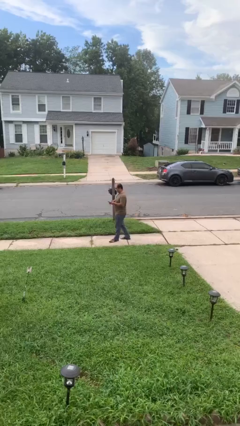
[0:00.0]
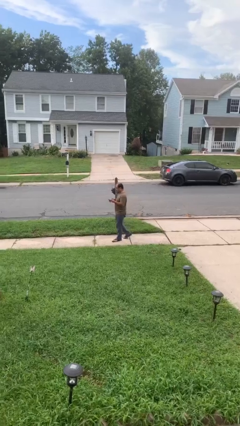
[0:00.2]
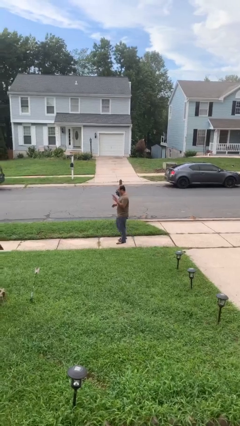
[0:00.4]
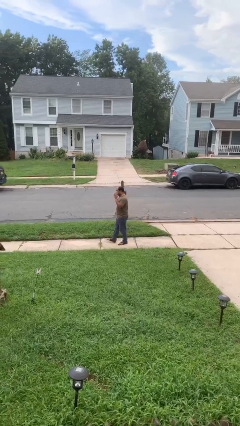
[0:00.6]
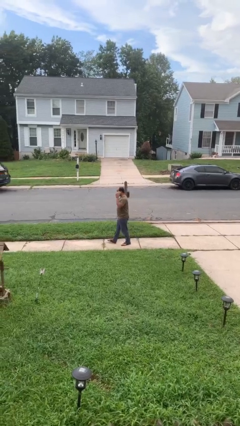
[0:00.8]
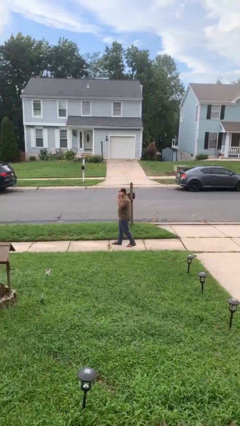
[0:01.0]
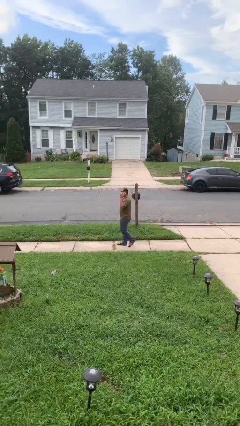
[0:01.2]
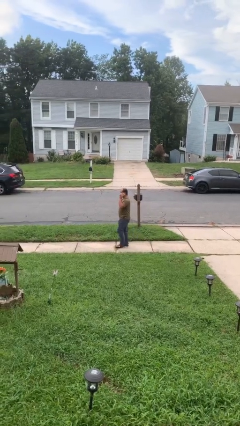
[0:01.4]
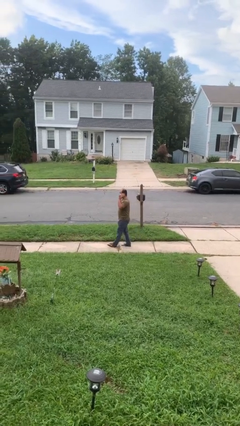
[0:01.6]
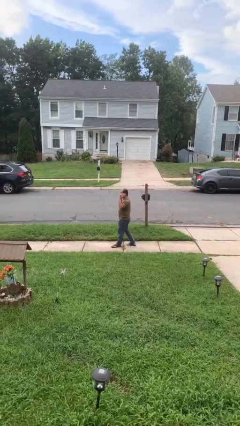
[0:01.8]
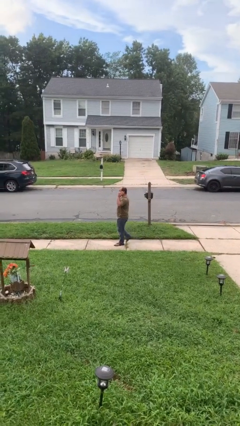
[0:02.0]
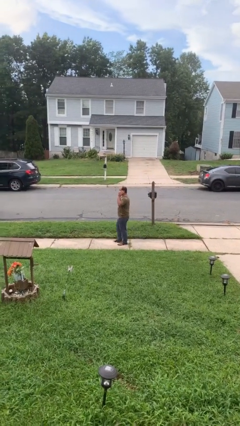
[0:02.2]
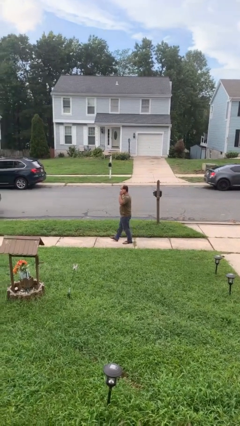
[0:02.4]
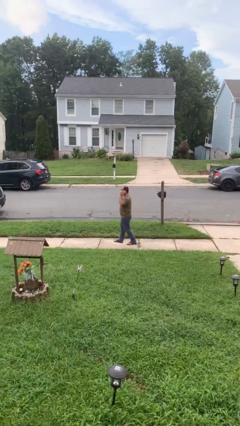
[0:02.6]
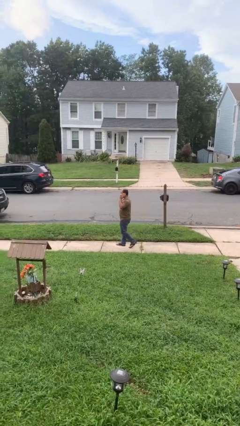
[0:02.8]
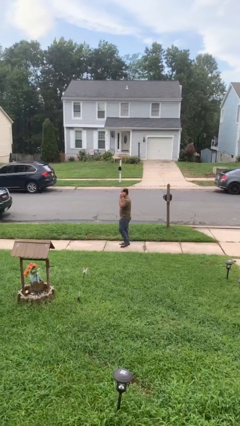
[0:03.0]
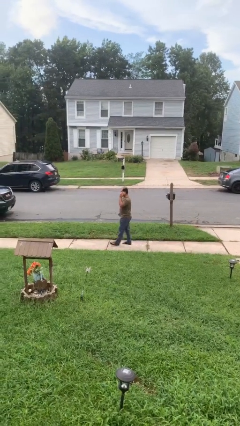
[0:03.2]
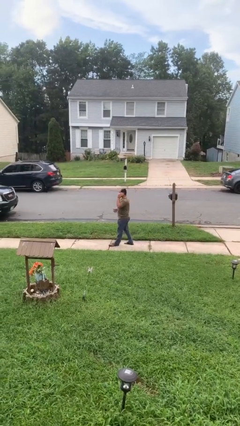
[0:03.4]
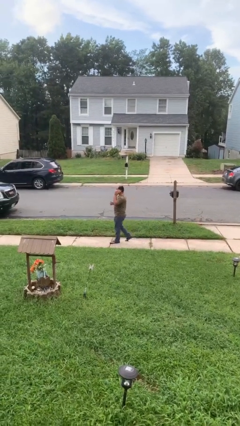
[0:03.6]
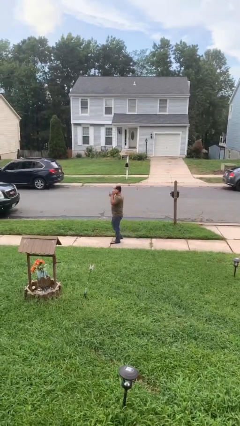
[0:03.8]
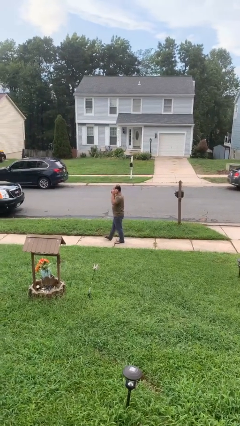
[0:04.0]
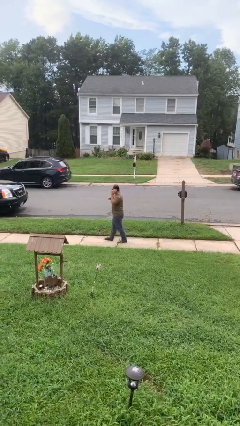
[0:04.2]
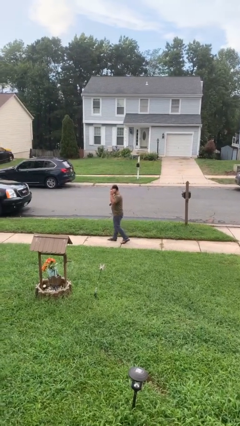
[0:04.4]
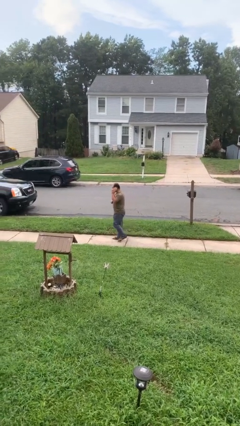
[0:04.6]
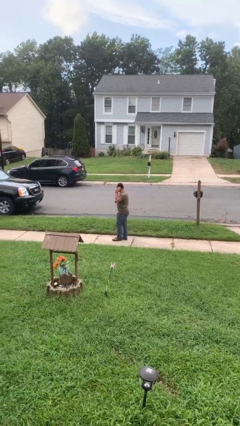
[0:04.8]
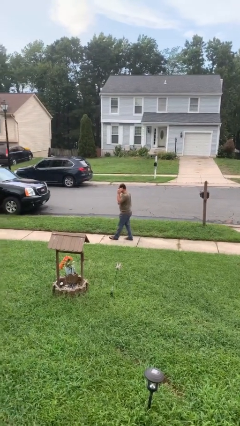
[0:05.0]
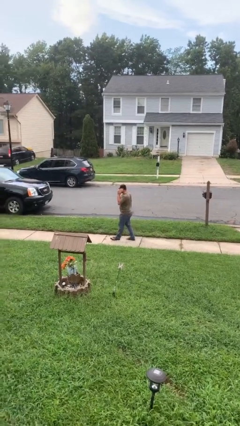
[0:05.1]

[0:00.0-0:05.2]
person talks on phone

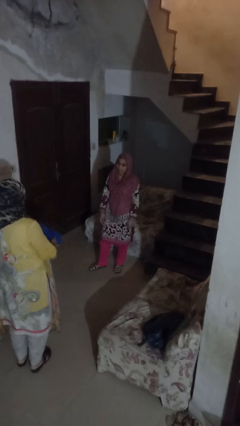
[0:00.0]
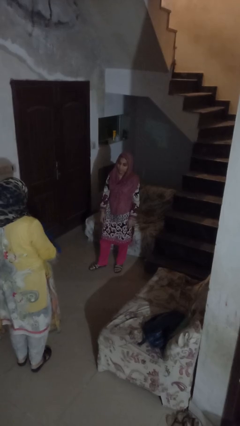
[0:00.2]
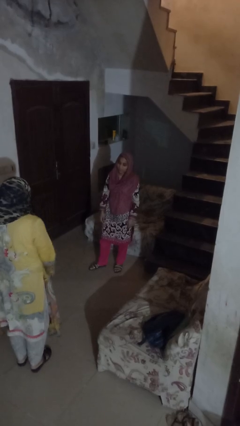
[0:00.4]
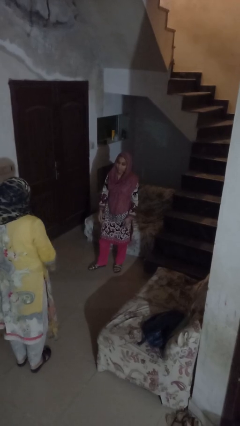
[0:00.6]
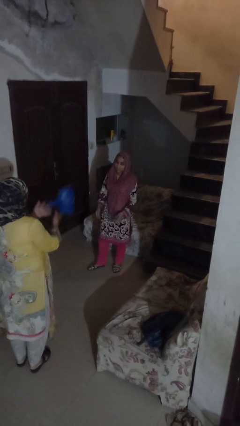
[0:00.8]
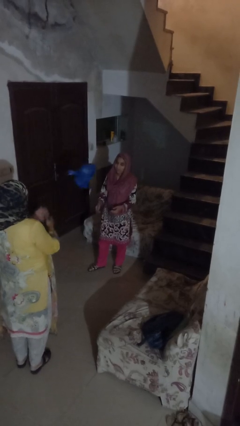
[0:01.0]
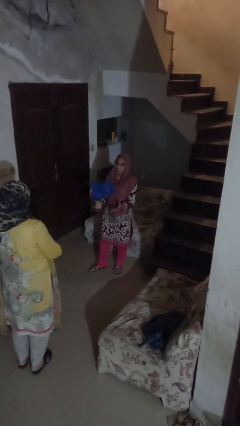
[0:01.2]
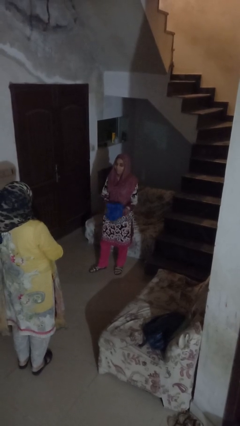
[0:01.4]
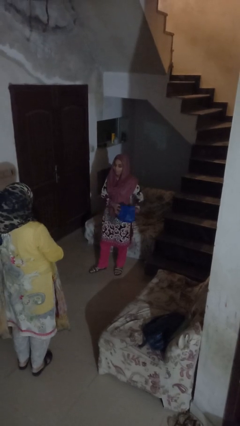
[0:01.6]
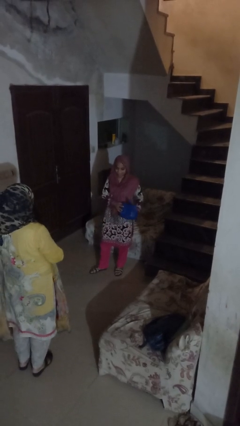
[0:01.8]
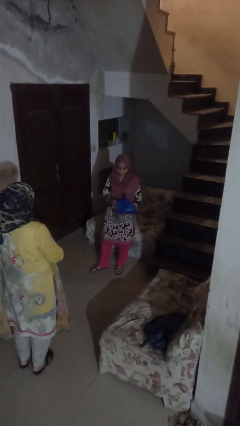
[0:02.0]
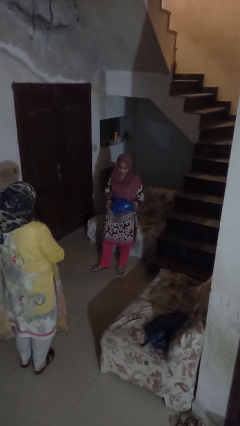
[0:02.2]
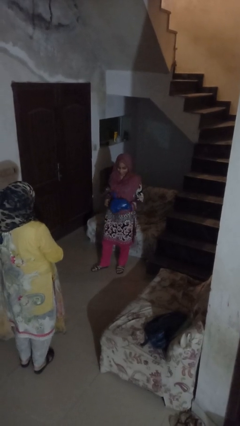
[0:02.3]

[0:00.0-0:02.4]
person catches object from person

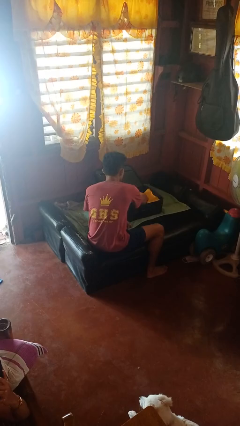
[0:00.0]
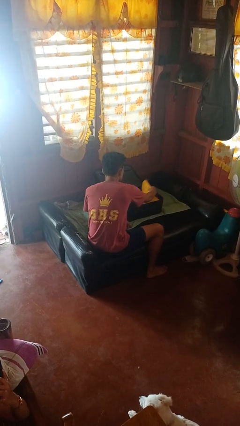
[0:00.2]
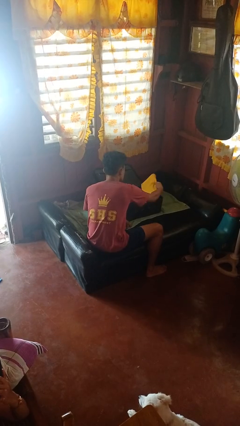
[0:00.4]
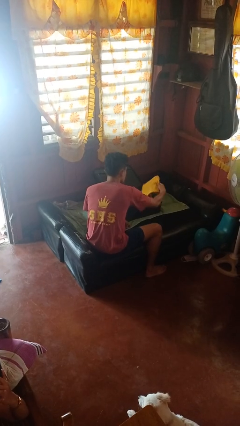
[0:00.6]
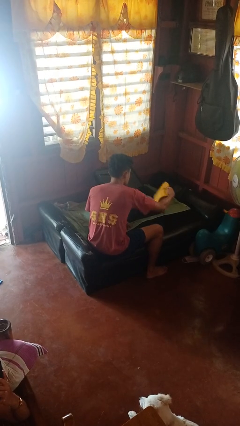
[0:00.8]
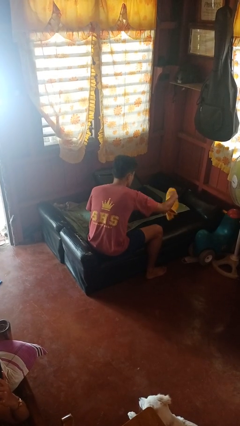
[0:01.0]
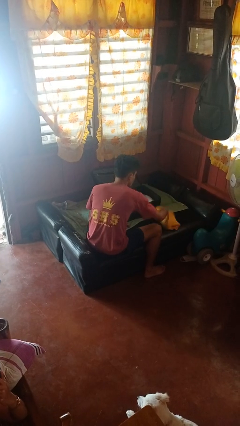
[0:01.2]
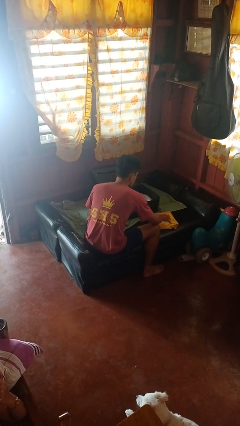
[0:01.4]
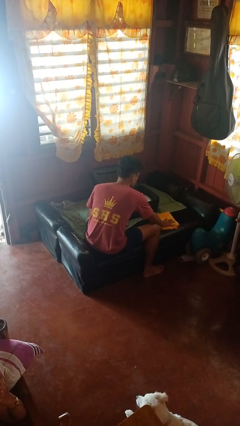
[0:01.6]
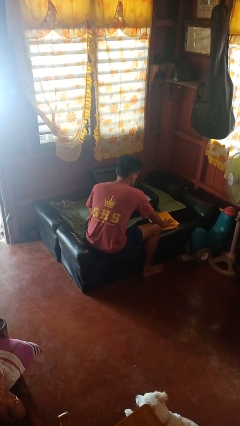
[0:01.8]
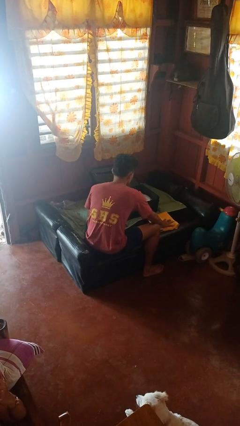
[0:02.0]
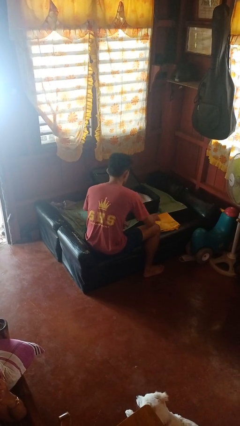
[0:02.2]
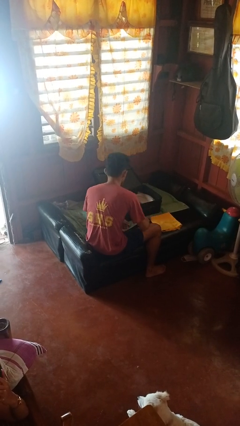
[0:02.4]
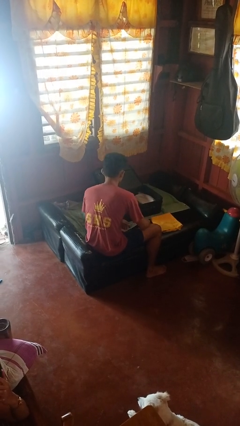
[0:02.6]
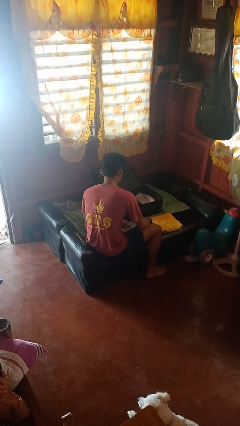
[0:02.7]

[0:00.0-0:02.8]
person unloads clothes from suitcase

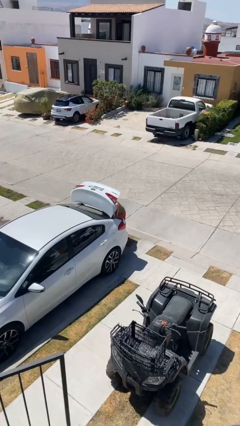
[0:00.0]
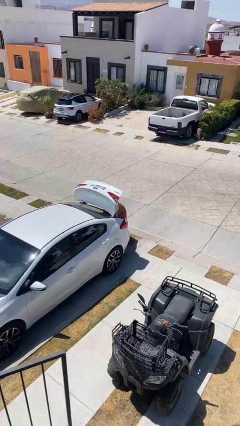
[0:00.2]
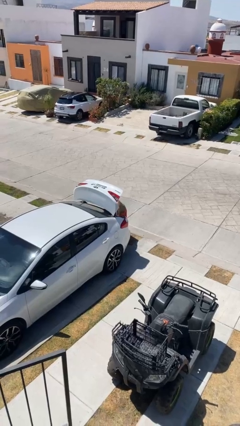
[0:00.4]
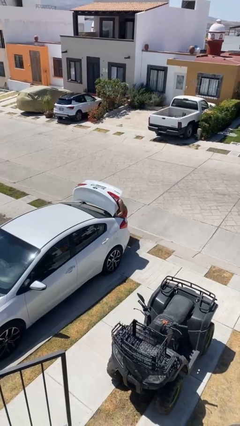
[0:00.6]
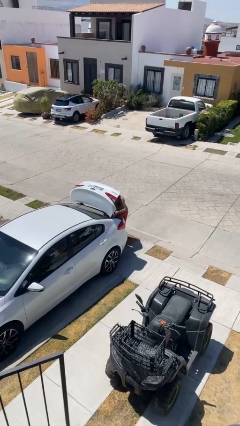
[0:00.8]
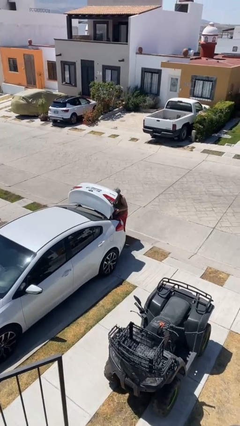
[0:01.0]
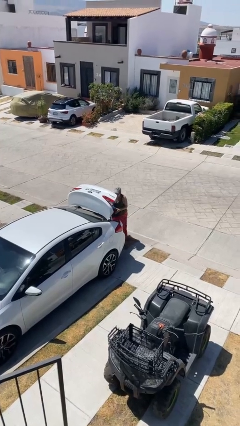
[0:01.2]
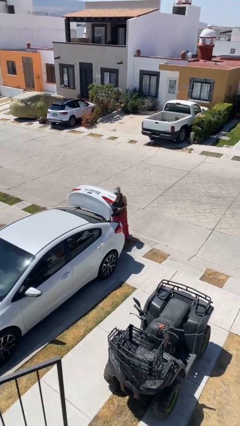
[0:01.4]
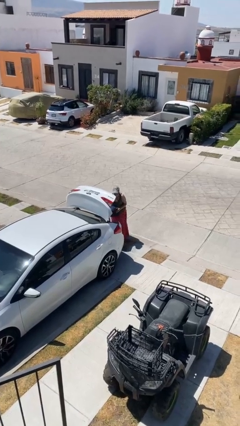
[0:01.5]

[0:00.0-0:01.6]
person unloads car

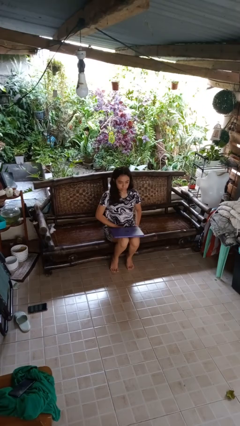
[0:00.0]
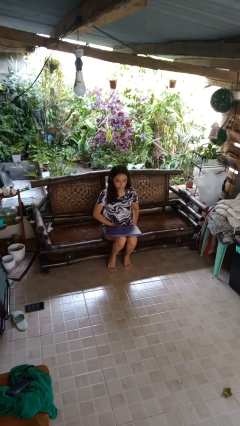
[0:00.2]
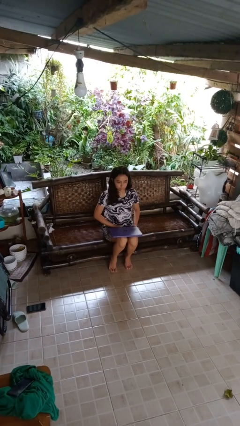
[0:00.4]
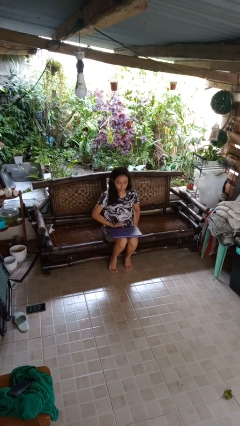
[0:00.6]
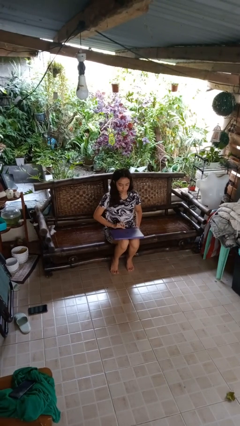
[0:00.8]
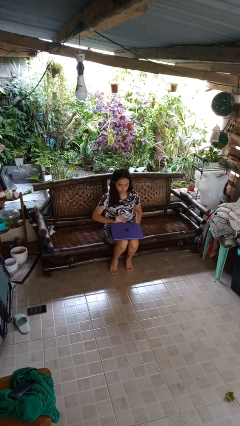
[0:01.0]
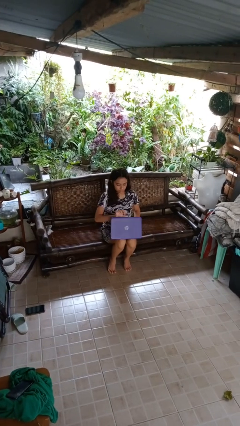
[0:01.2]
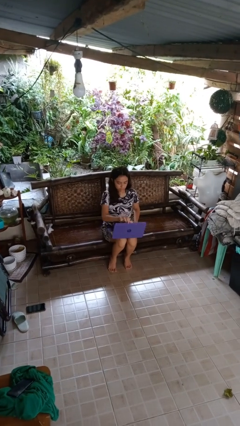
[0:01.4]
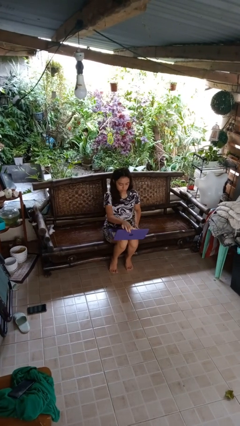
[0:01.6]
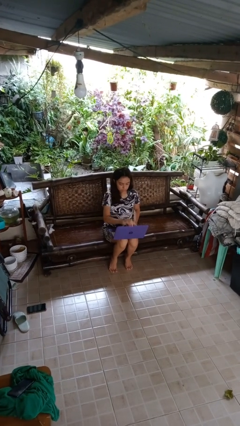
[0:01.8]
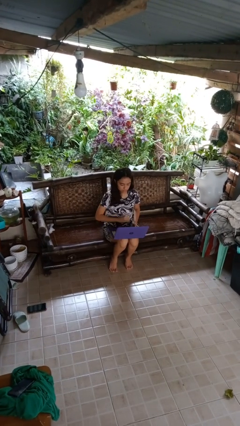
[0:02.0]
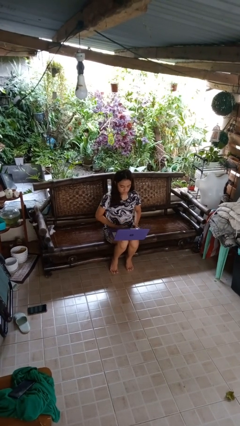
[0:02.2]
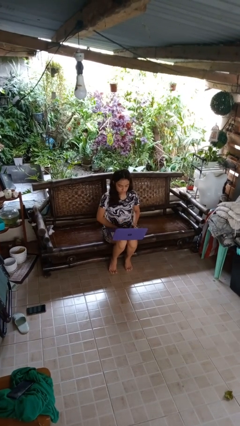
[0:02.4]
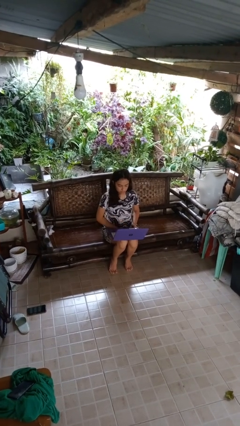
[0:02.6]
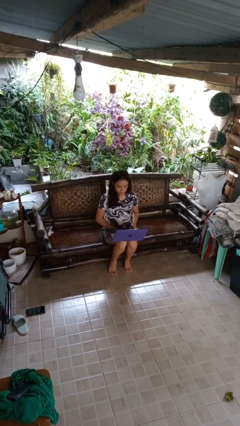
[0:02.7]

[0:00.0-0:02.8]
person opens laptop

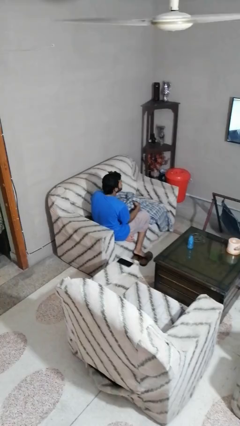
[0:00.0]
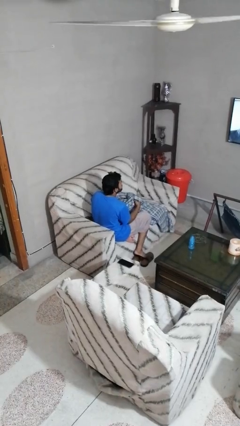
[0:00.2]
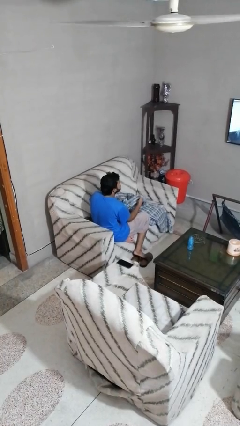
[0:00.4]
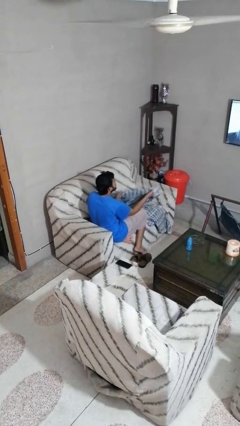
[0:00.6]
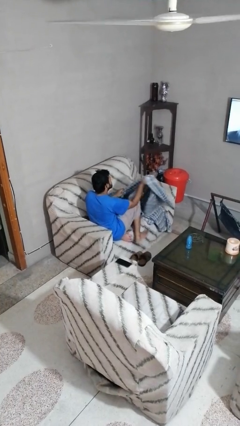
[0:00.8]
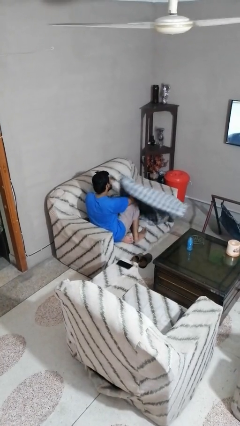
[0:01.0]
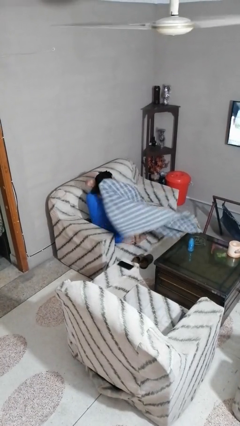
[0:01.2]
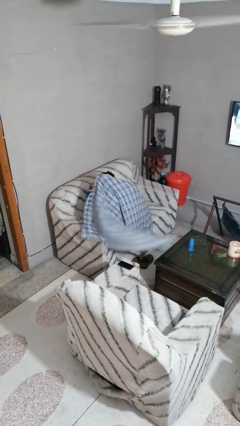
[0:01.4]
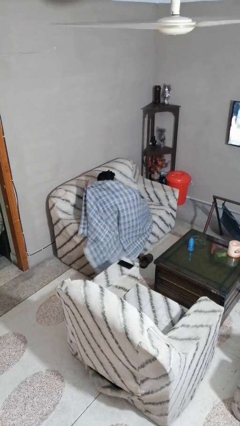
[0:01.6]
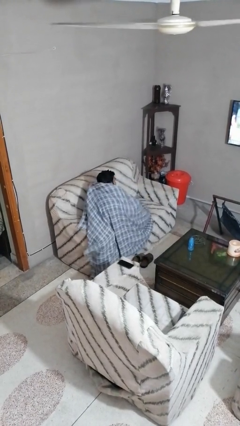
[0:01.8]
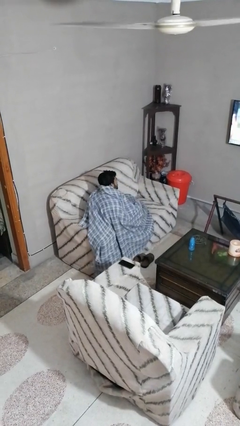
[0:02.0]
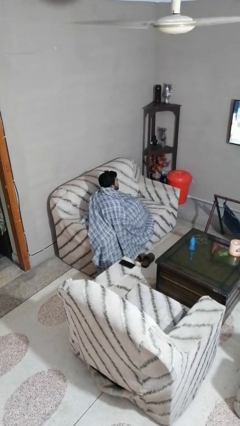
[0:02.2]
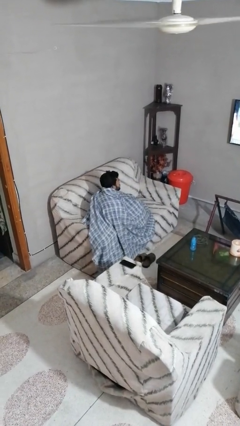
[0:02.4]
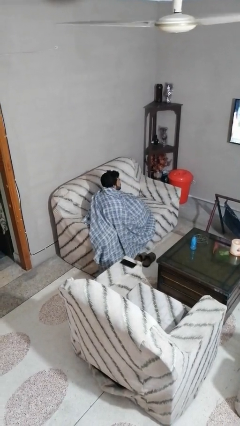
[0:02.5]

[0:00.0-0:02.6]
person covers with blanket
